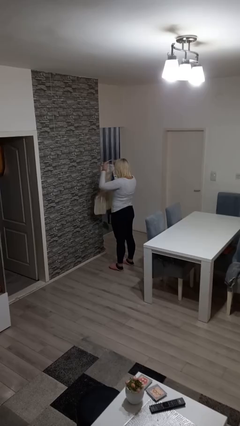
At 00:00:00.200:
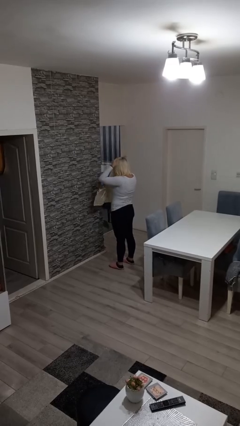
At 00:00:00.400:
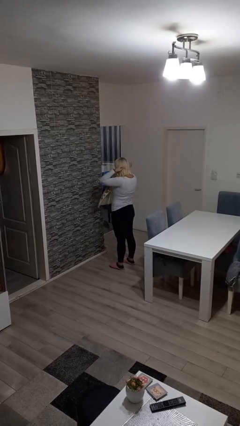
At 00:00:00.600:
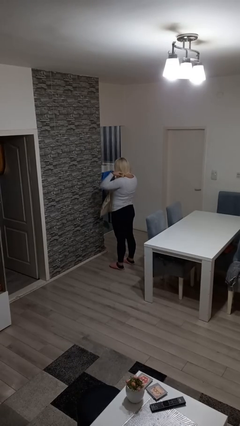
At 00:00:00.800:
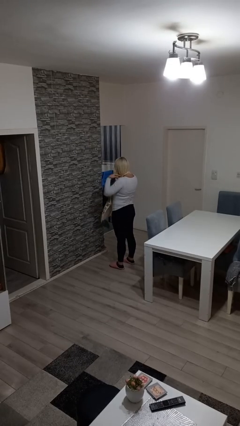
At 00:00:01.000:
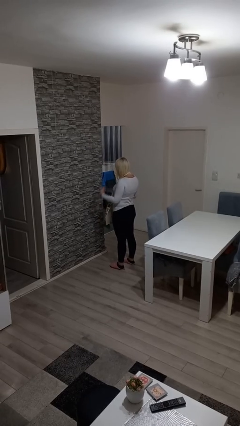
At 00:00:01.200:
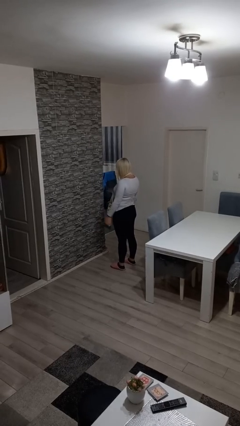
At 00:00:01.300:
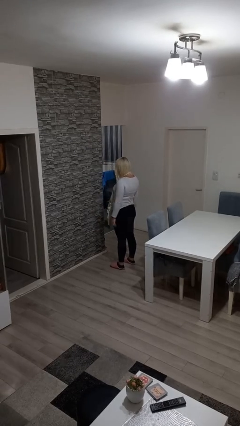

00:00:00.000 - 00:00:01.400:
person puts on apron

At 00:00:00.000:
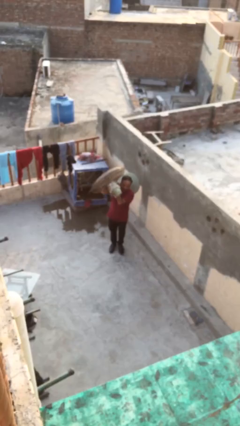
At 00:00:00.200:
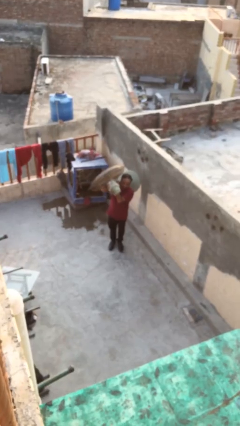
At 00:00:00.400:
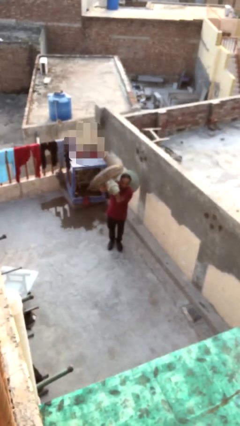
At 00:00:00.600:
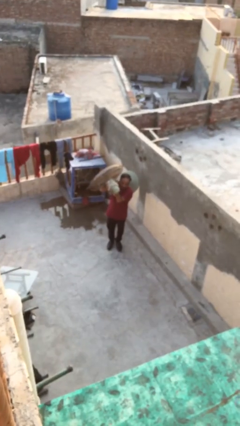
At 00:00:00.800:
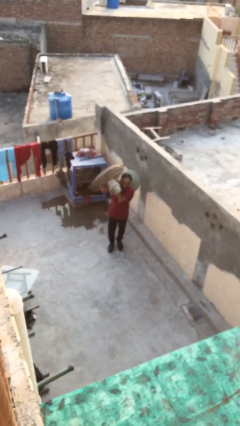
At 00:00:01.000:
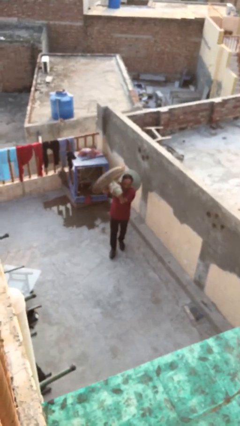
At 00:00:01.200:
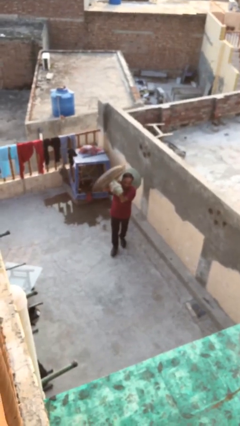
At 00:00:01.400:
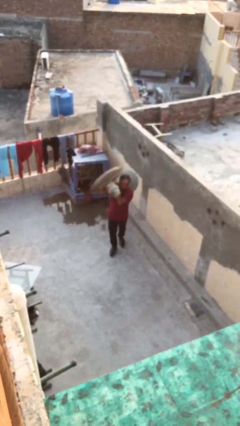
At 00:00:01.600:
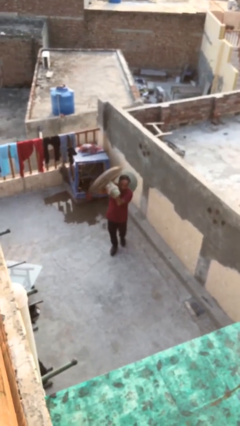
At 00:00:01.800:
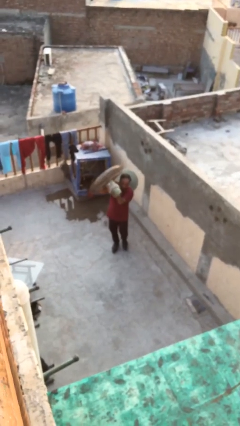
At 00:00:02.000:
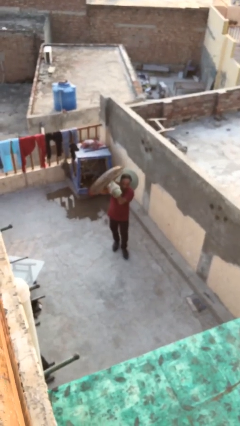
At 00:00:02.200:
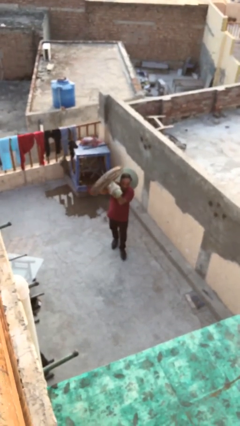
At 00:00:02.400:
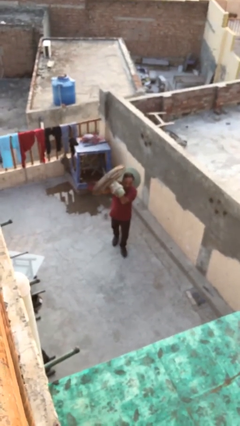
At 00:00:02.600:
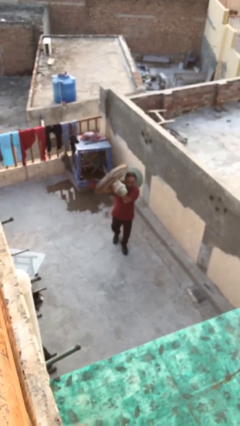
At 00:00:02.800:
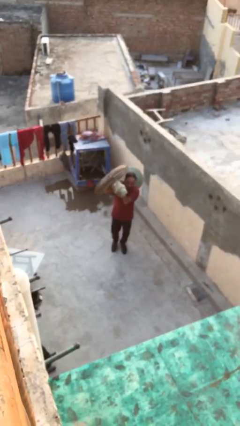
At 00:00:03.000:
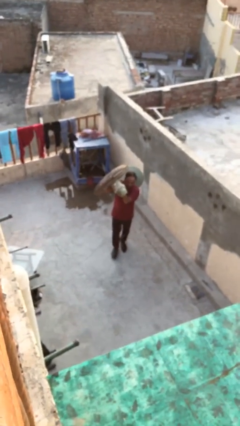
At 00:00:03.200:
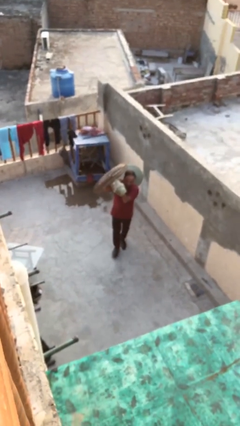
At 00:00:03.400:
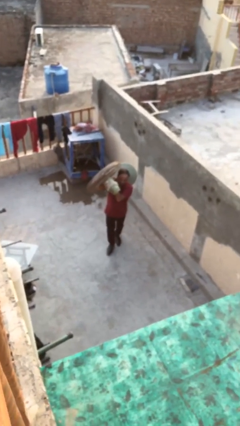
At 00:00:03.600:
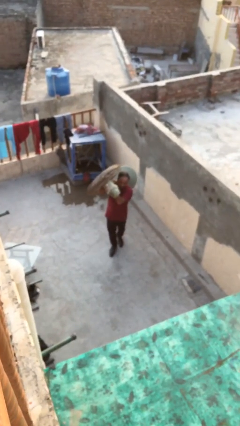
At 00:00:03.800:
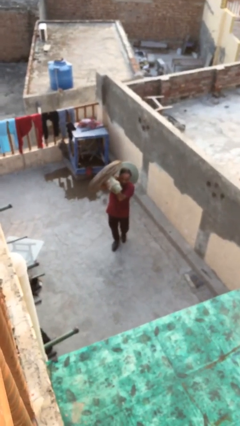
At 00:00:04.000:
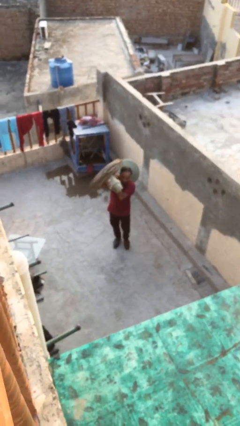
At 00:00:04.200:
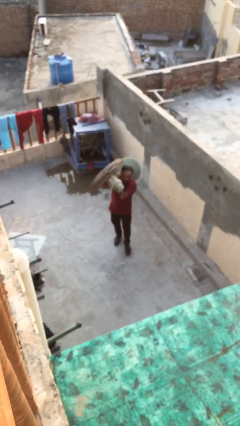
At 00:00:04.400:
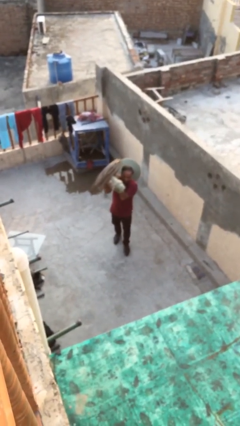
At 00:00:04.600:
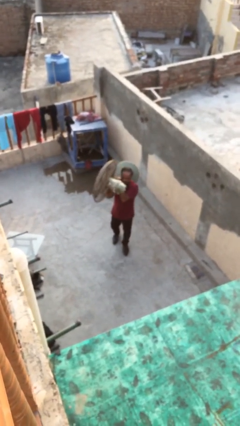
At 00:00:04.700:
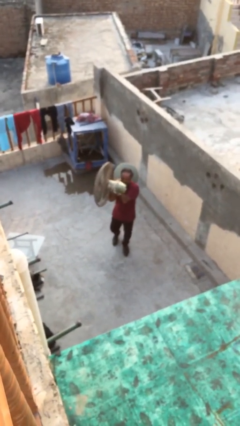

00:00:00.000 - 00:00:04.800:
person carries heavy object

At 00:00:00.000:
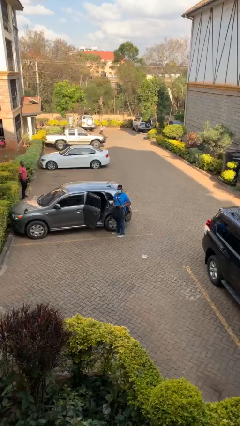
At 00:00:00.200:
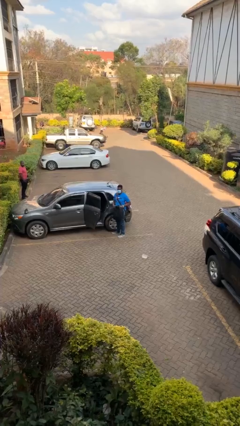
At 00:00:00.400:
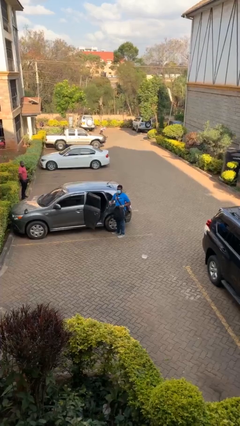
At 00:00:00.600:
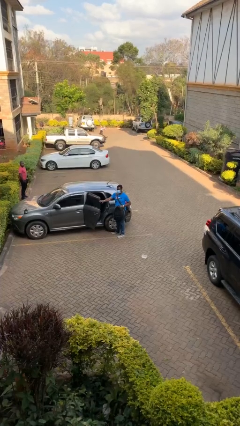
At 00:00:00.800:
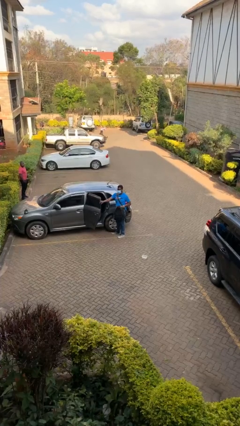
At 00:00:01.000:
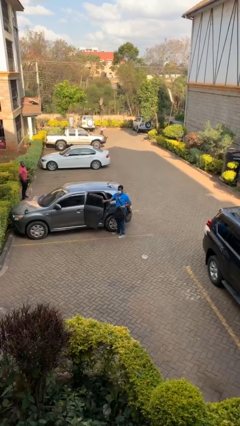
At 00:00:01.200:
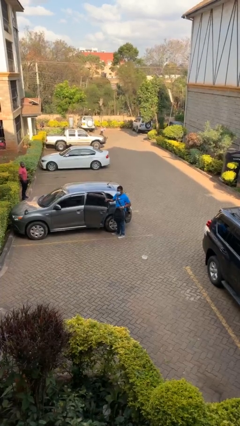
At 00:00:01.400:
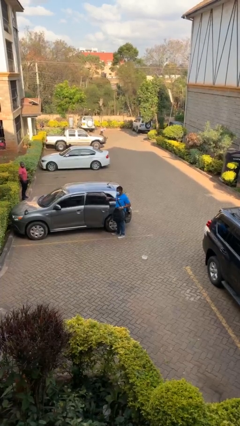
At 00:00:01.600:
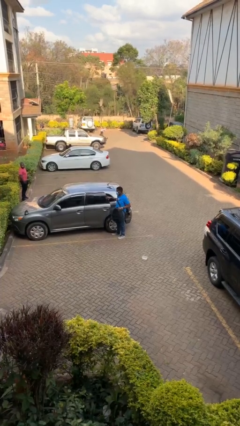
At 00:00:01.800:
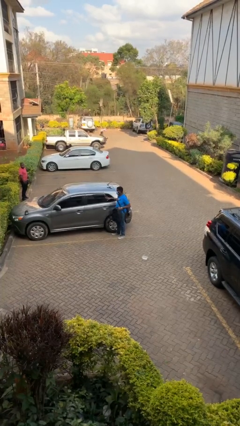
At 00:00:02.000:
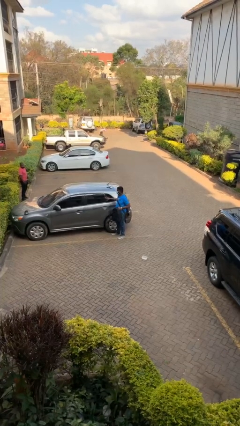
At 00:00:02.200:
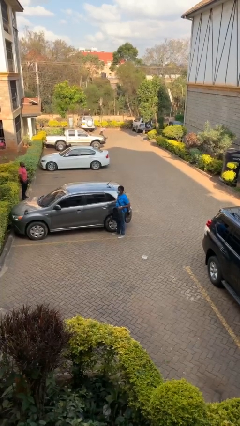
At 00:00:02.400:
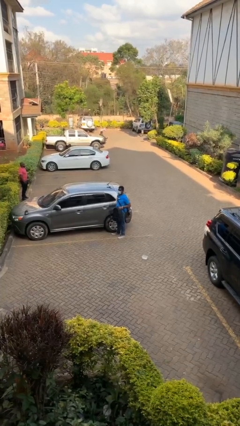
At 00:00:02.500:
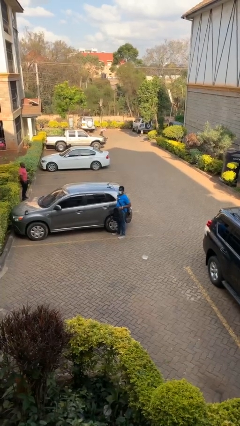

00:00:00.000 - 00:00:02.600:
person closes car door

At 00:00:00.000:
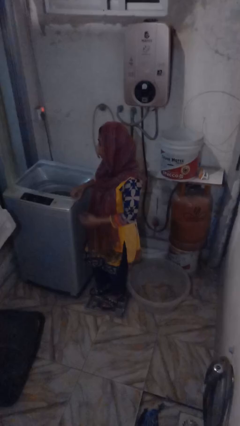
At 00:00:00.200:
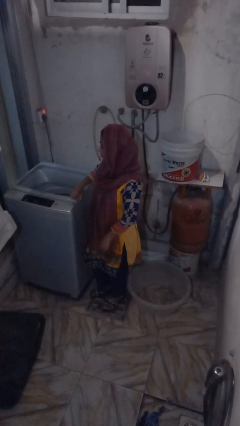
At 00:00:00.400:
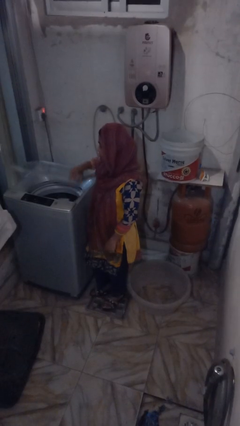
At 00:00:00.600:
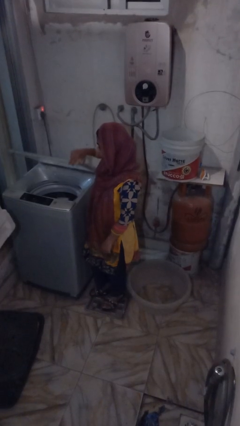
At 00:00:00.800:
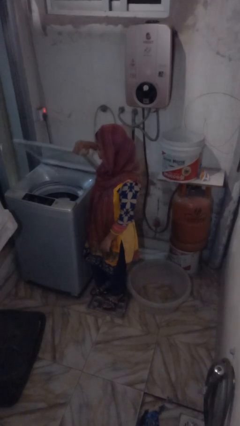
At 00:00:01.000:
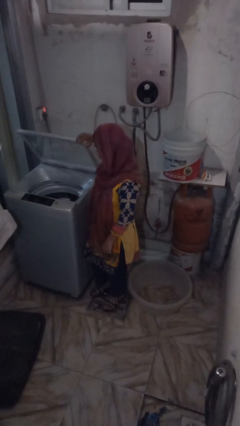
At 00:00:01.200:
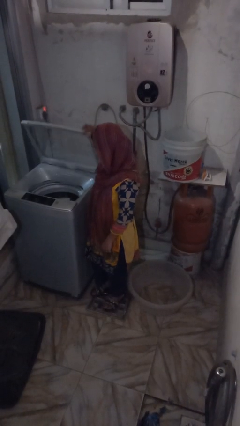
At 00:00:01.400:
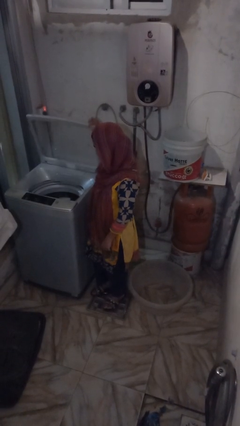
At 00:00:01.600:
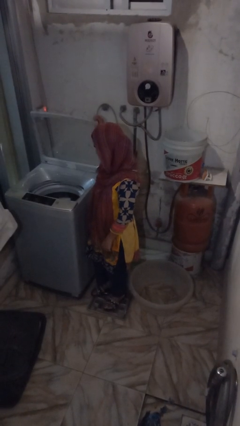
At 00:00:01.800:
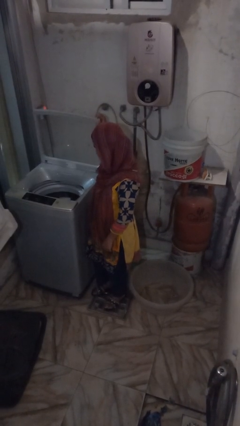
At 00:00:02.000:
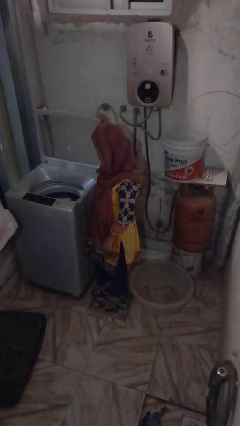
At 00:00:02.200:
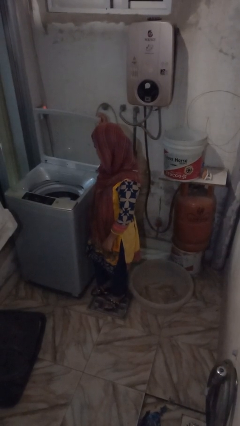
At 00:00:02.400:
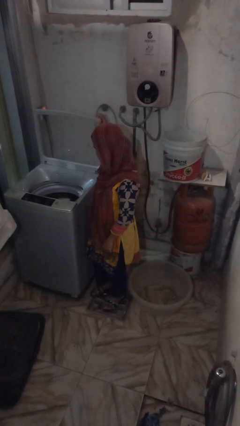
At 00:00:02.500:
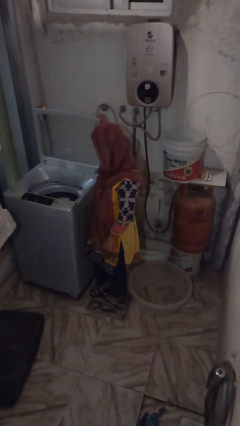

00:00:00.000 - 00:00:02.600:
person opens clothes washer

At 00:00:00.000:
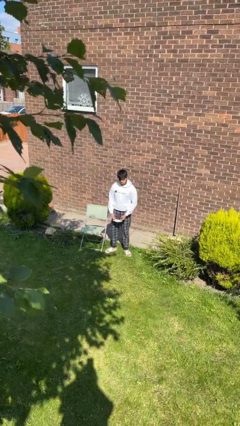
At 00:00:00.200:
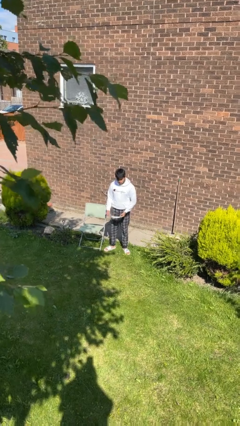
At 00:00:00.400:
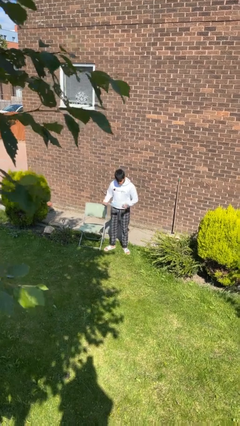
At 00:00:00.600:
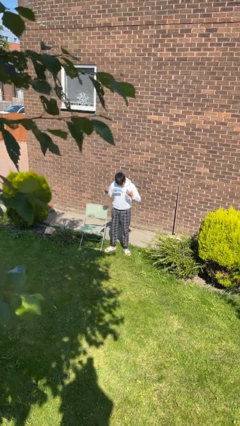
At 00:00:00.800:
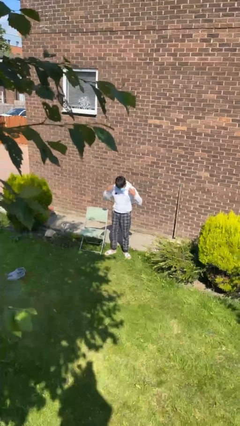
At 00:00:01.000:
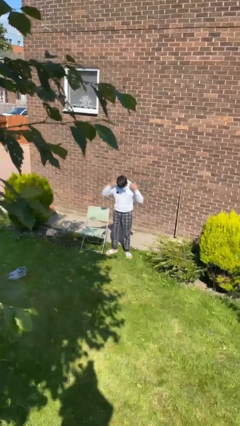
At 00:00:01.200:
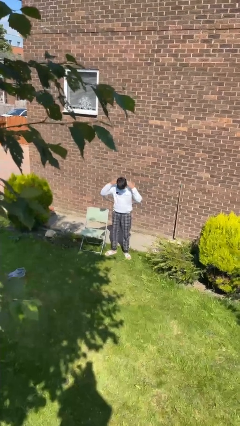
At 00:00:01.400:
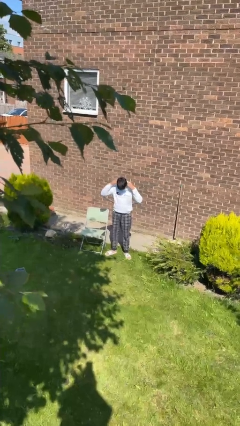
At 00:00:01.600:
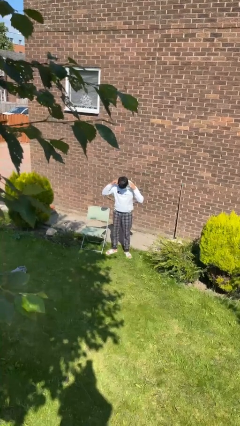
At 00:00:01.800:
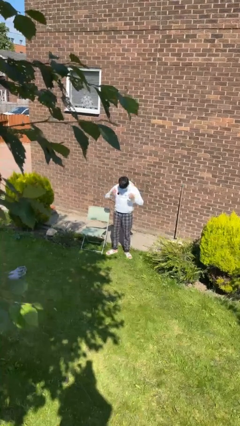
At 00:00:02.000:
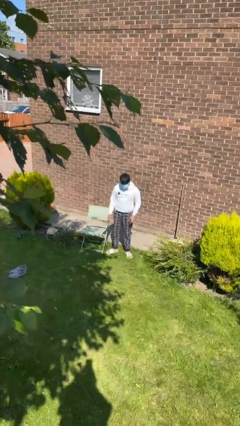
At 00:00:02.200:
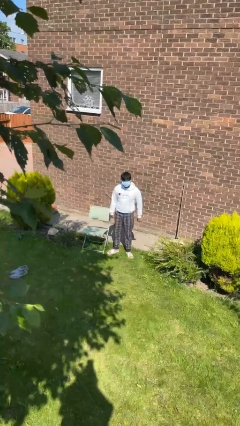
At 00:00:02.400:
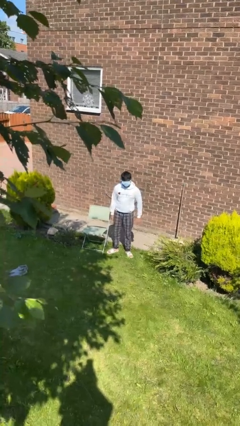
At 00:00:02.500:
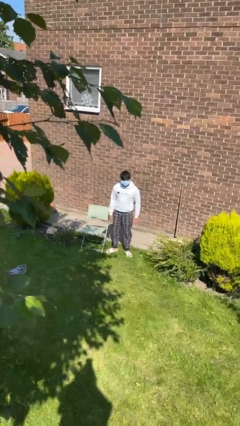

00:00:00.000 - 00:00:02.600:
person puts on facemask

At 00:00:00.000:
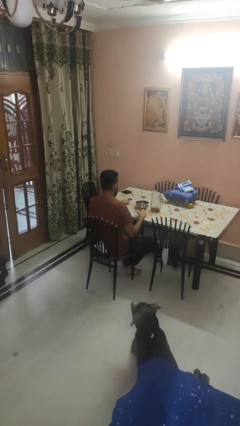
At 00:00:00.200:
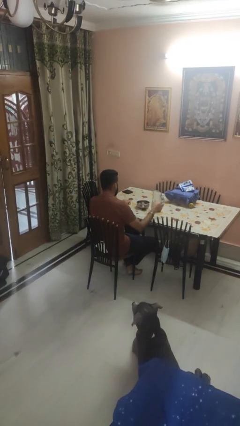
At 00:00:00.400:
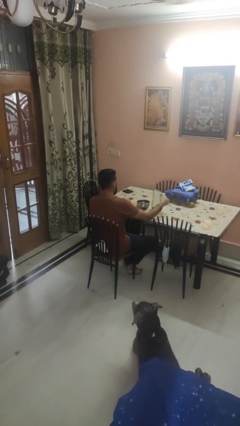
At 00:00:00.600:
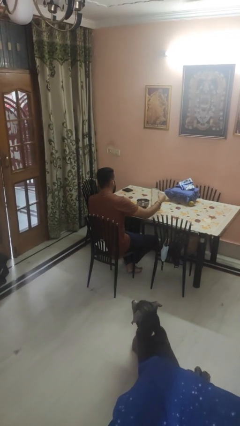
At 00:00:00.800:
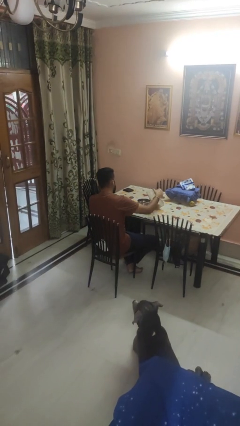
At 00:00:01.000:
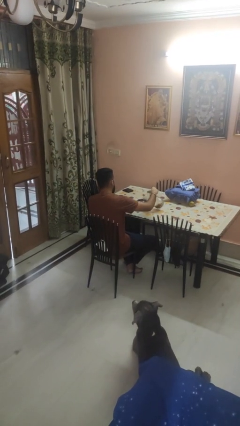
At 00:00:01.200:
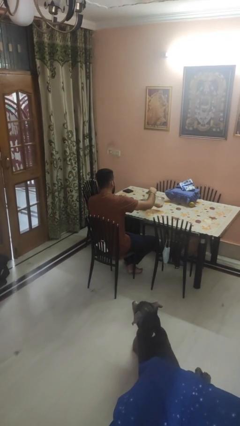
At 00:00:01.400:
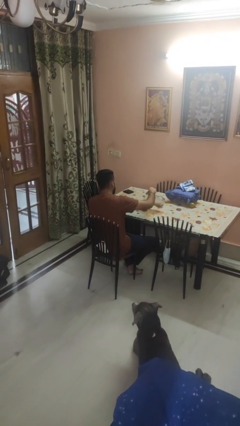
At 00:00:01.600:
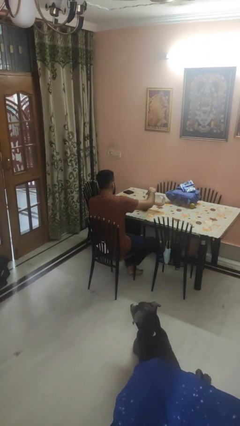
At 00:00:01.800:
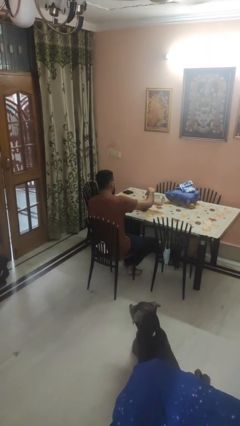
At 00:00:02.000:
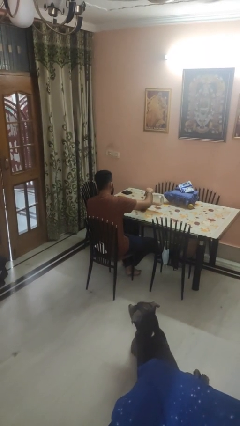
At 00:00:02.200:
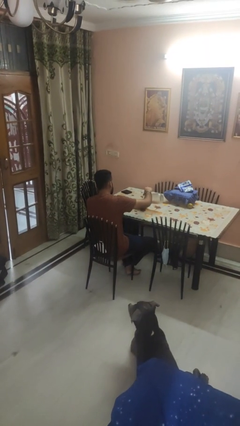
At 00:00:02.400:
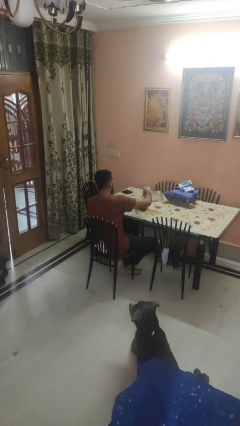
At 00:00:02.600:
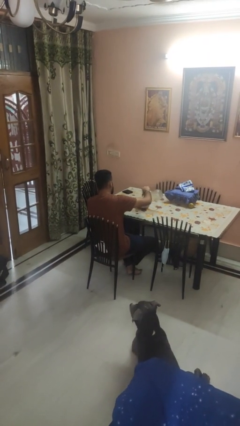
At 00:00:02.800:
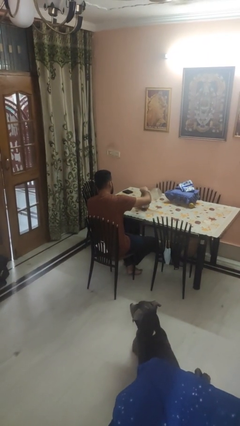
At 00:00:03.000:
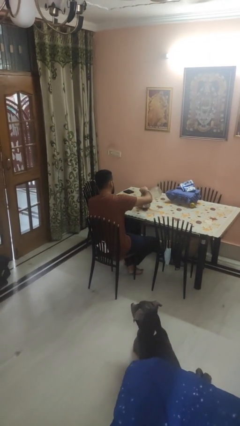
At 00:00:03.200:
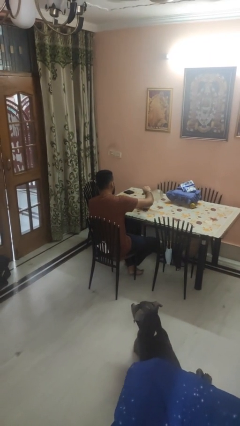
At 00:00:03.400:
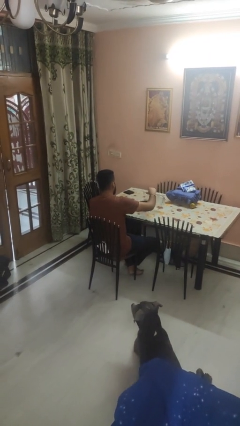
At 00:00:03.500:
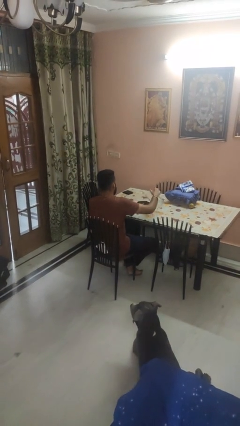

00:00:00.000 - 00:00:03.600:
person pours into bowl
